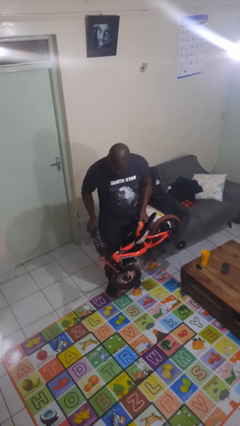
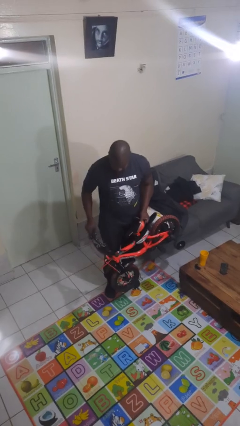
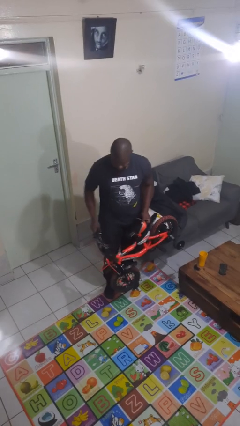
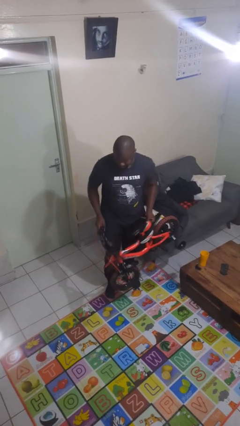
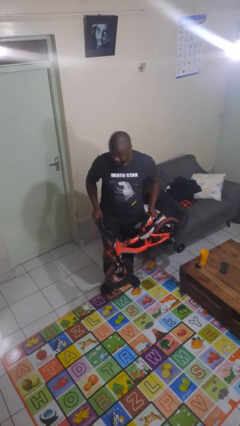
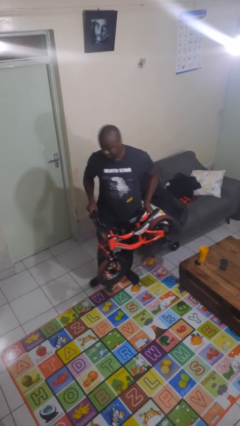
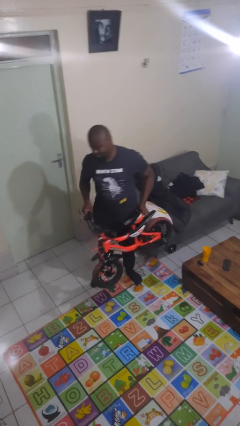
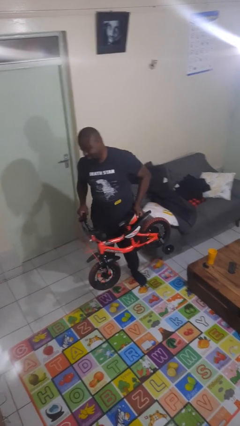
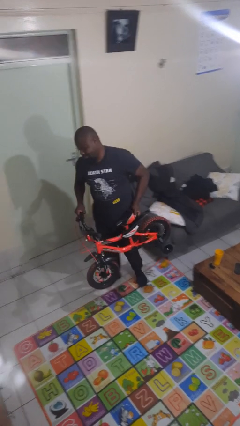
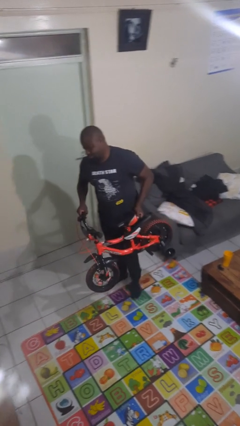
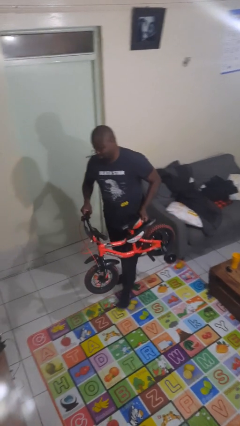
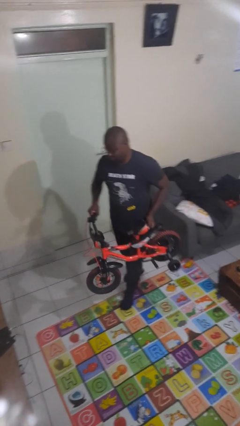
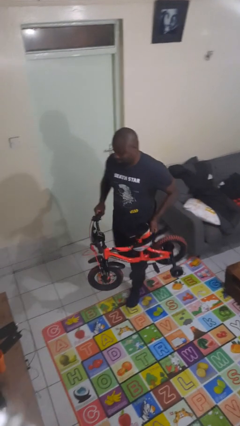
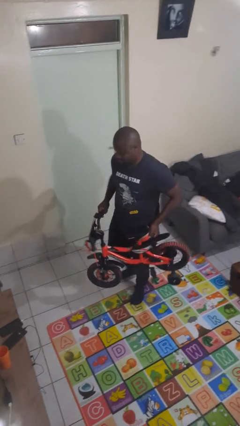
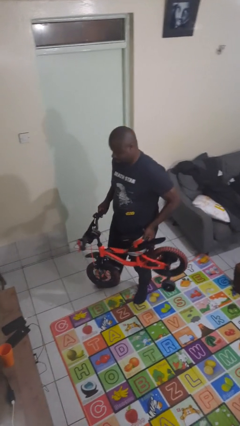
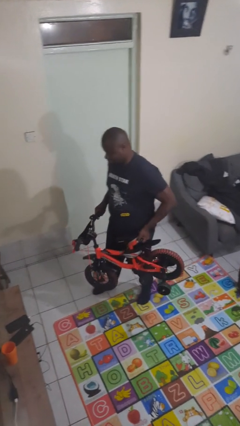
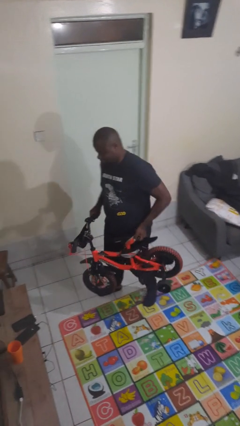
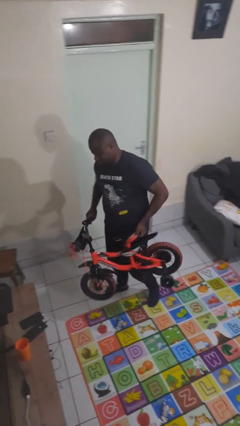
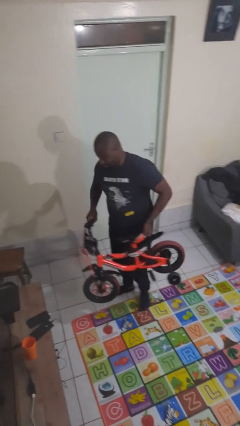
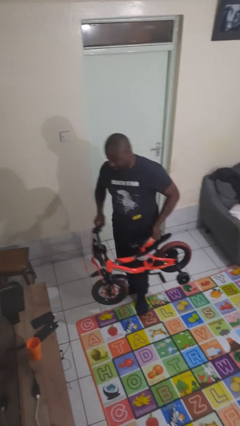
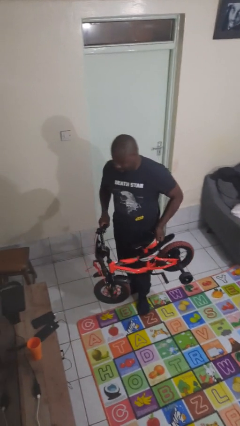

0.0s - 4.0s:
person carries bicycle

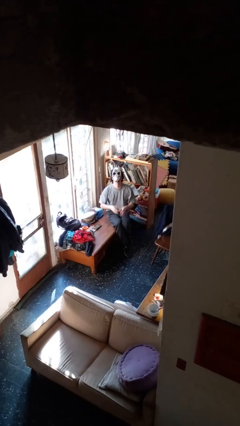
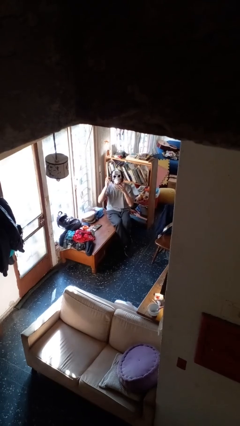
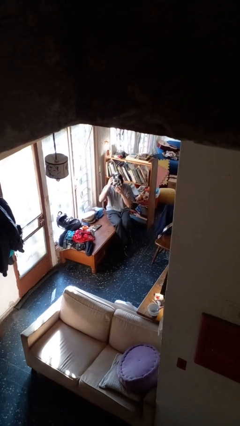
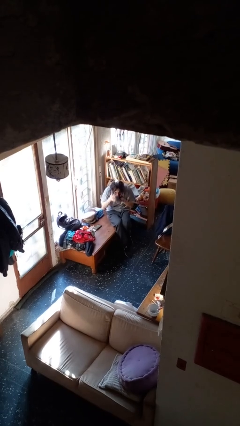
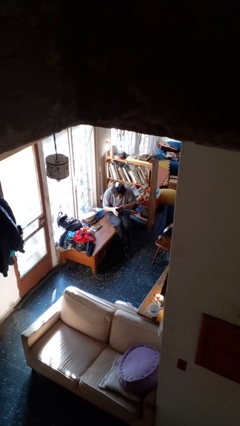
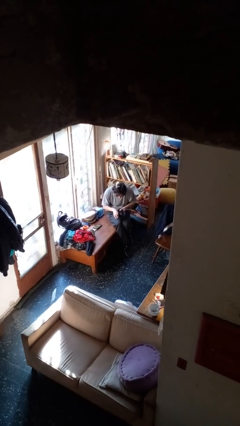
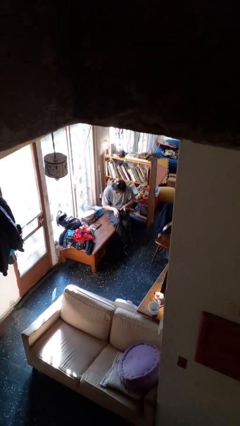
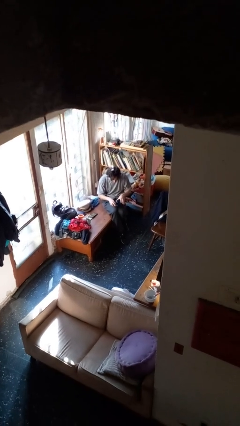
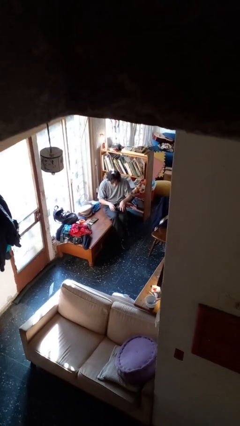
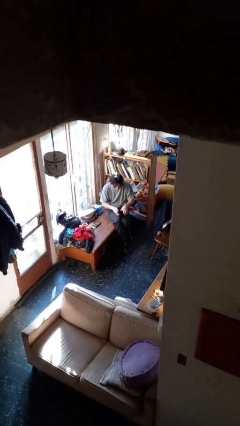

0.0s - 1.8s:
person takes off facemask

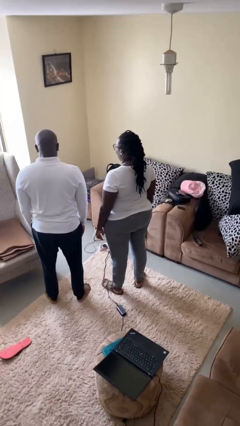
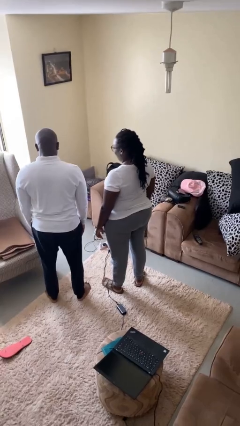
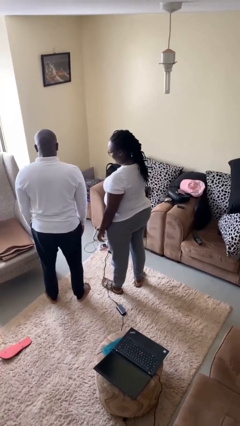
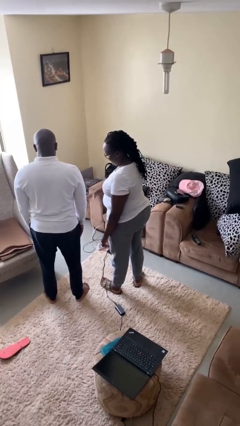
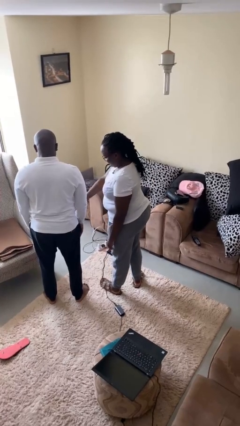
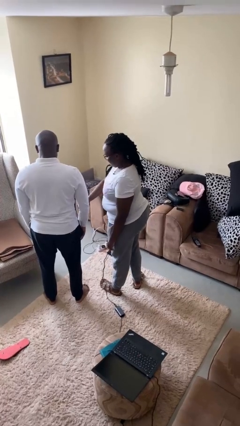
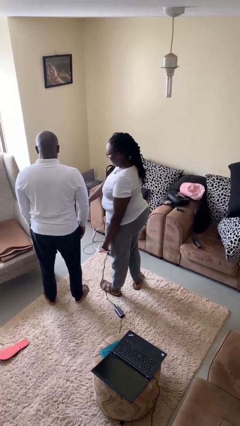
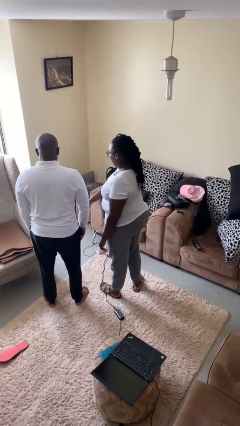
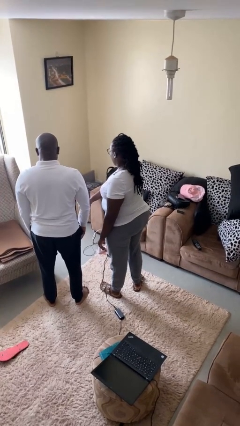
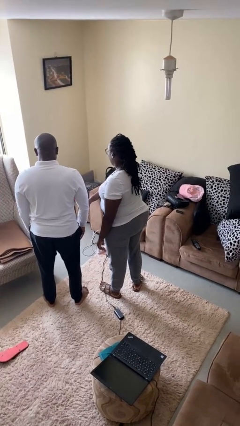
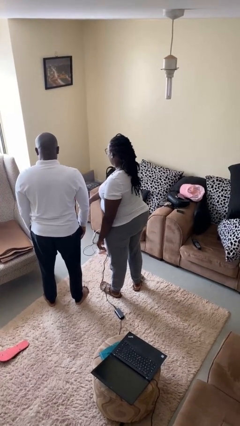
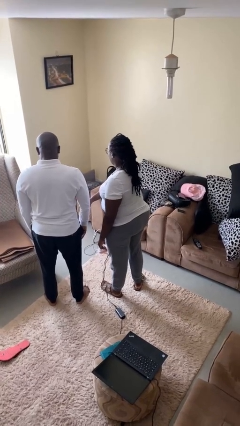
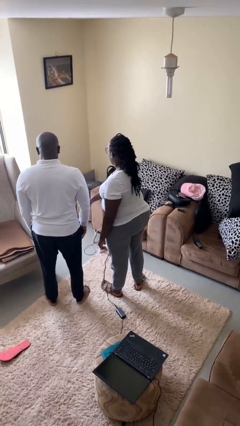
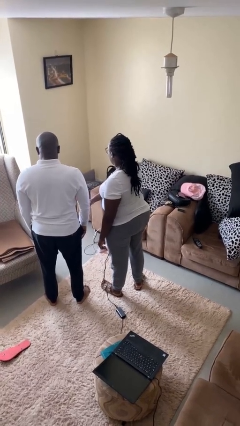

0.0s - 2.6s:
person grabs person by forearm

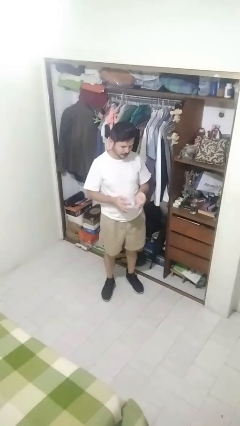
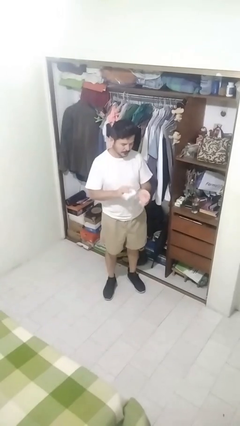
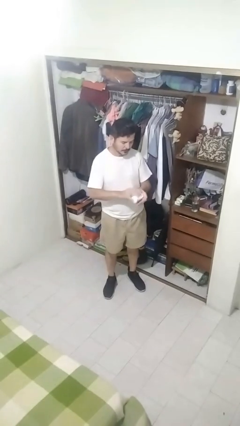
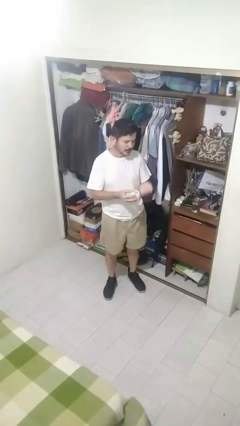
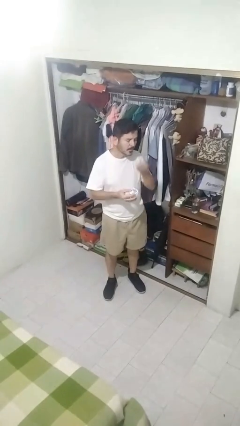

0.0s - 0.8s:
person takes medicine pills

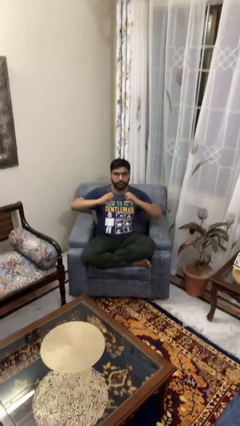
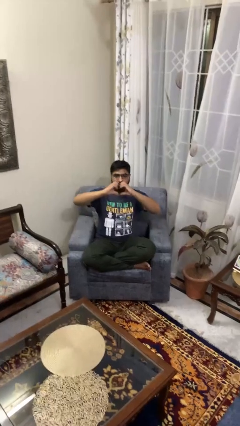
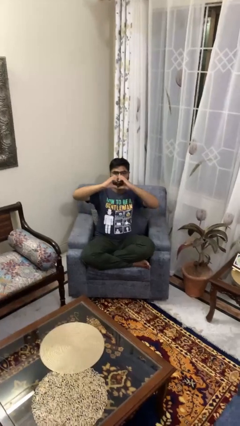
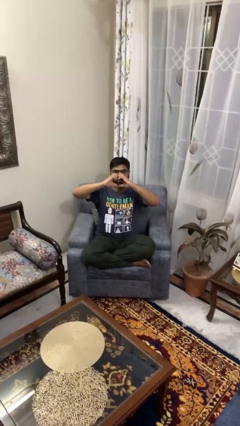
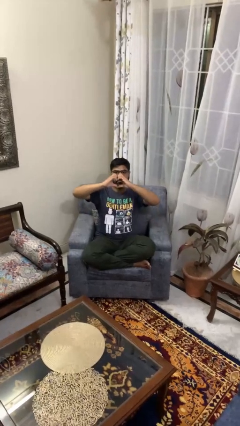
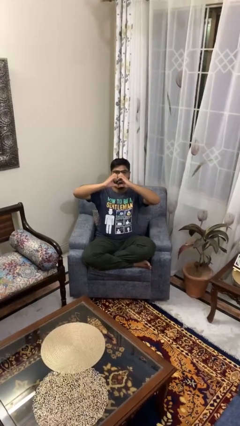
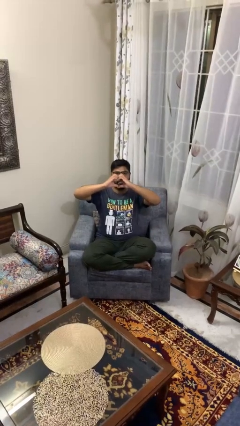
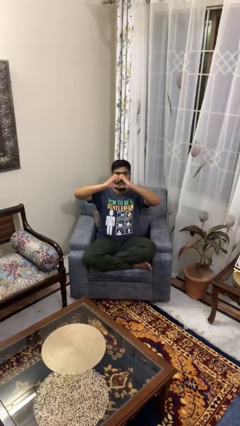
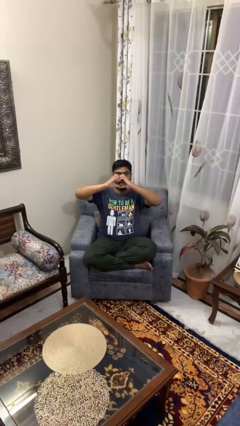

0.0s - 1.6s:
person gestures heart

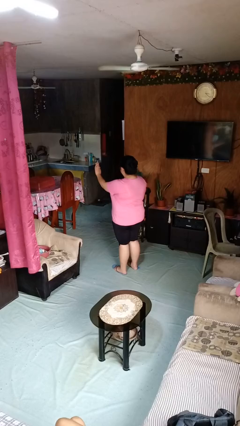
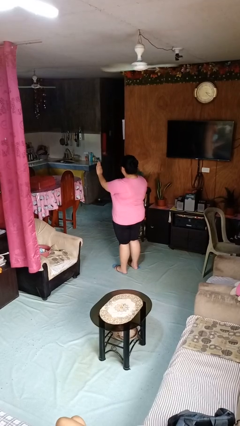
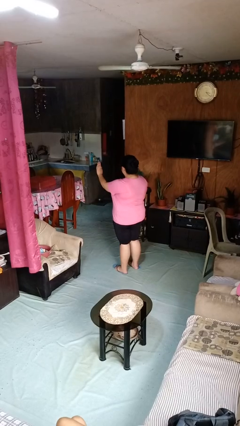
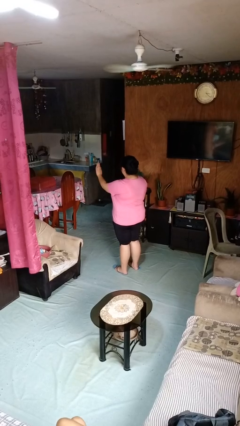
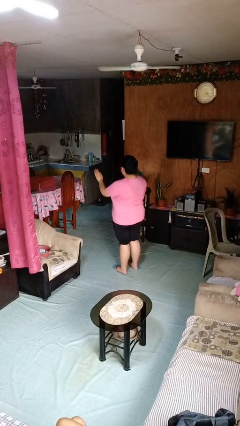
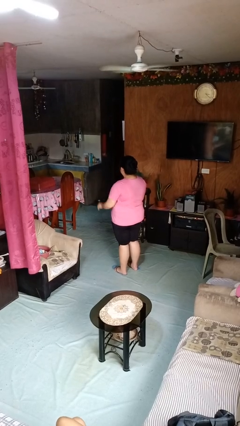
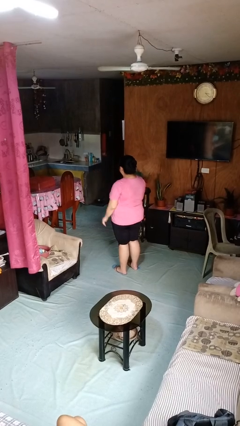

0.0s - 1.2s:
person gestures stop

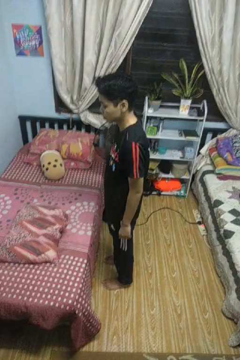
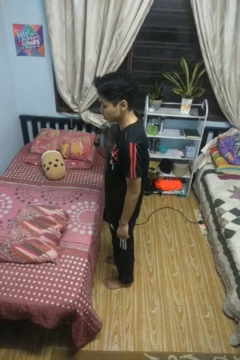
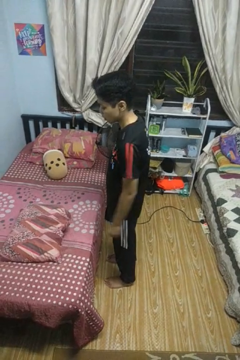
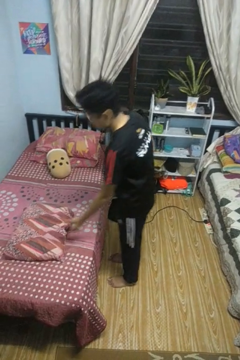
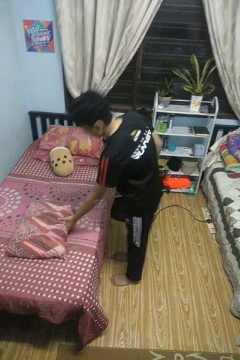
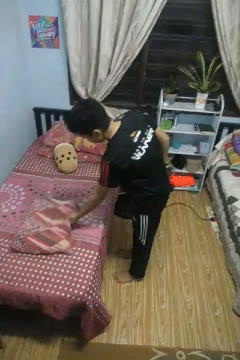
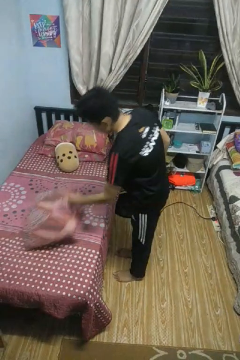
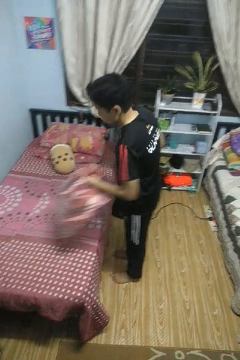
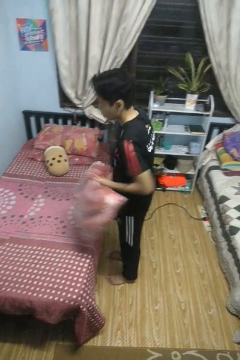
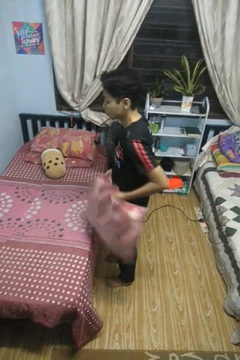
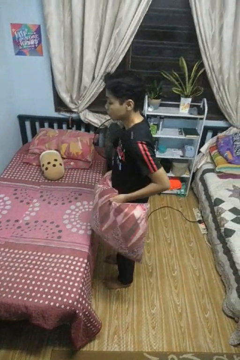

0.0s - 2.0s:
person picks up object from bed

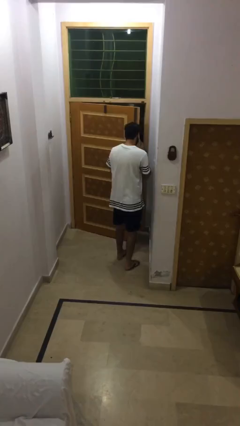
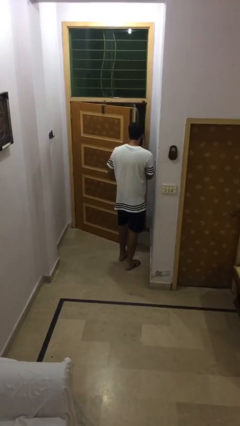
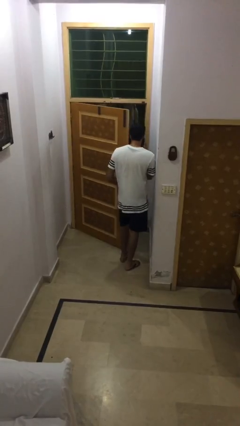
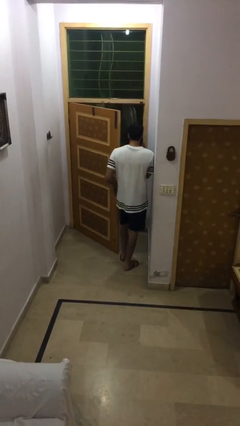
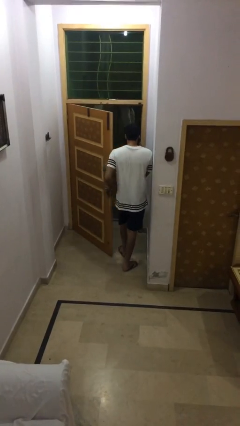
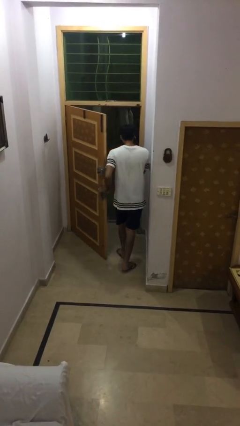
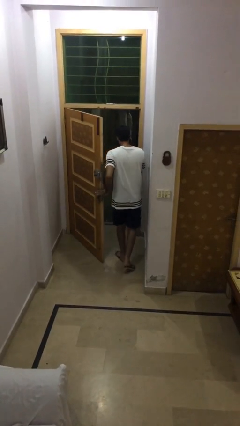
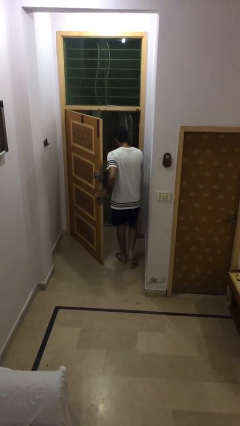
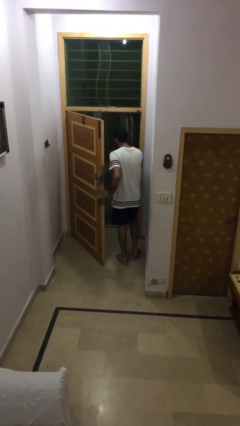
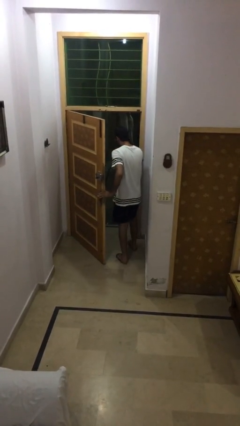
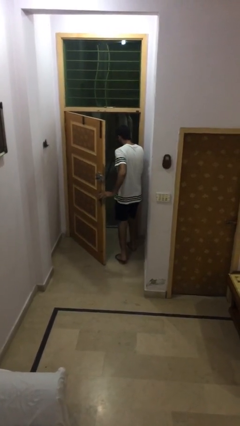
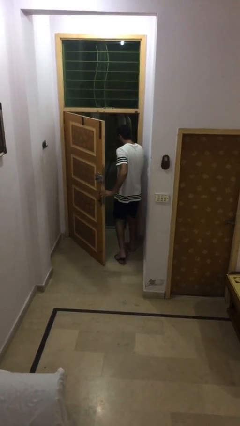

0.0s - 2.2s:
person exits scene through structure

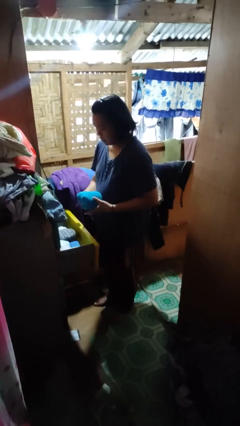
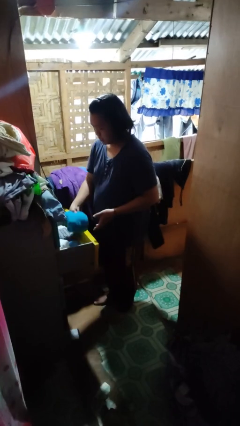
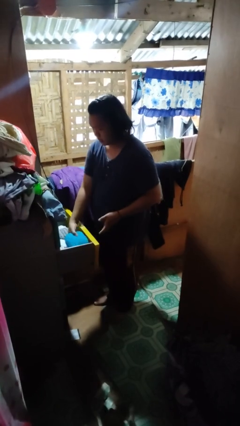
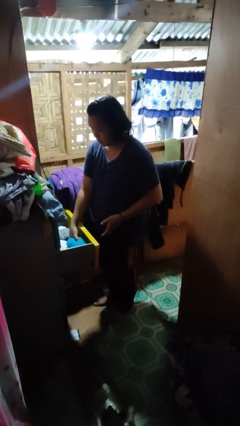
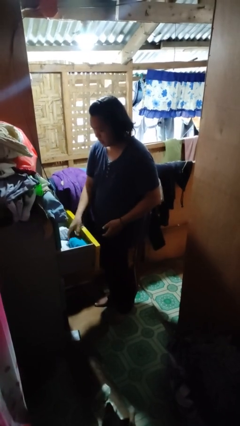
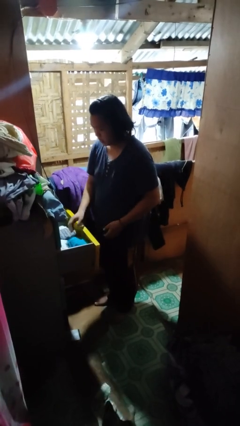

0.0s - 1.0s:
person puts clothes into dresser
